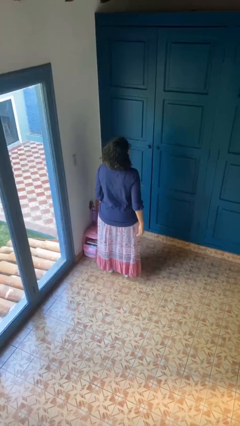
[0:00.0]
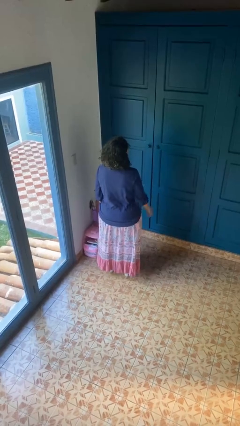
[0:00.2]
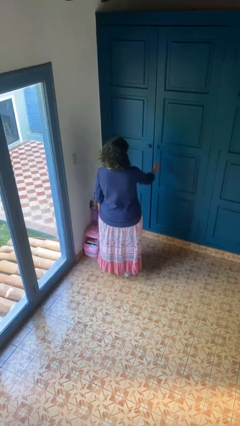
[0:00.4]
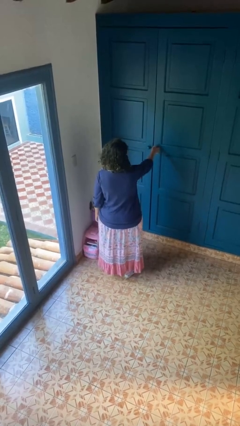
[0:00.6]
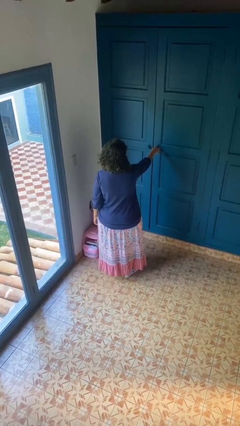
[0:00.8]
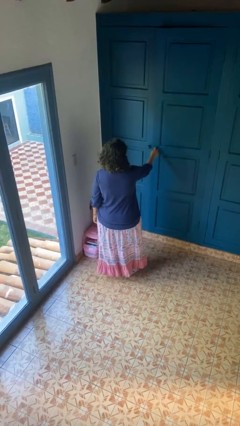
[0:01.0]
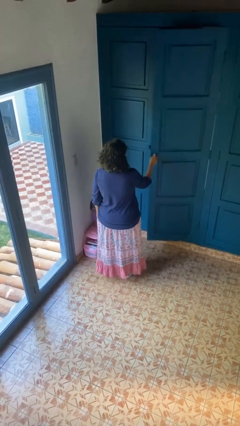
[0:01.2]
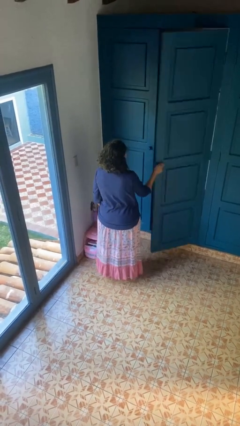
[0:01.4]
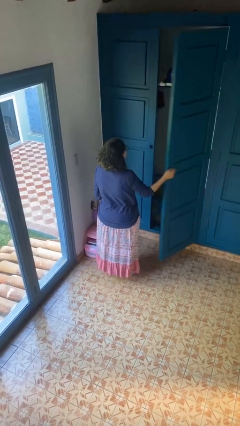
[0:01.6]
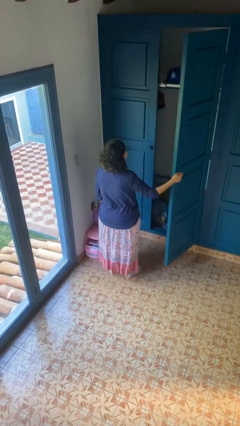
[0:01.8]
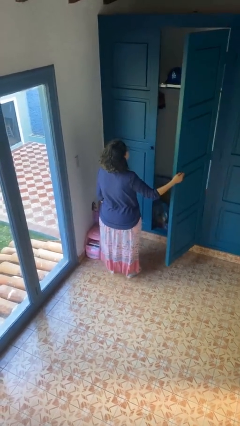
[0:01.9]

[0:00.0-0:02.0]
person opens closet door

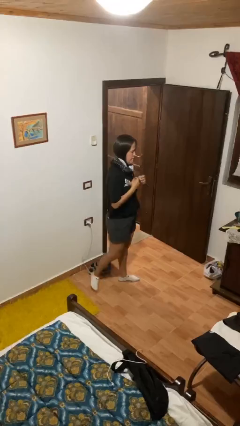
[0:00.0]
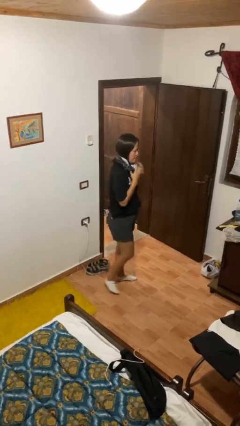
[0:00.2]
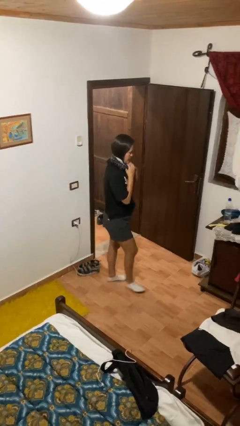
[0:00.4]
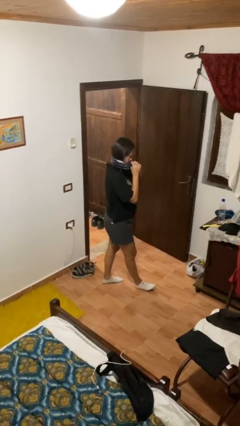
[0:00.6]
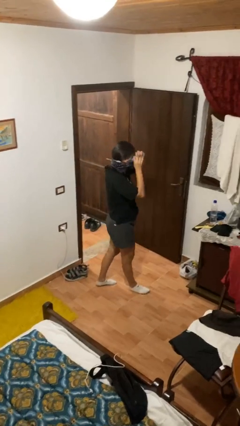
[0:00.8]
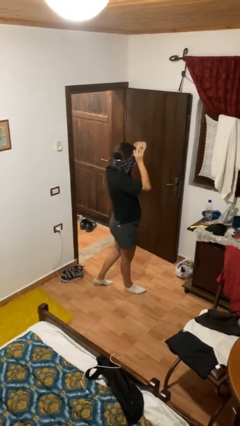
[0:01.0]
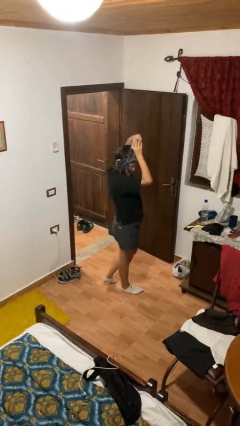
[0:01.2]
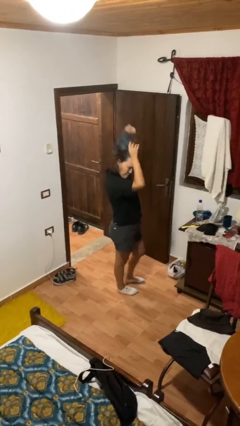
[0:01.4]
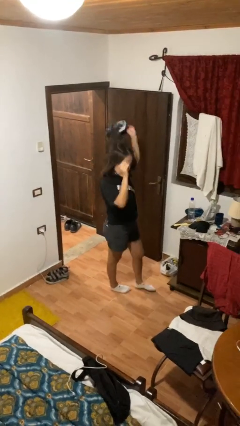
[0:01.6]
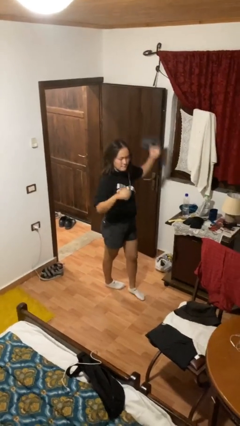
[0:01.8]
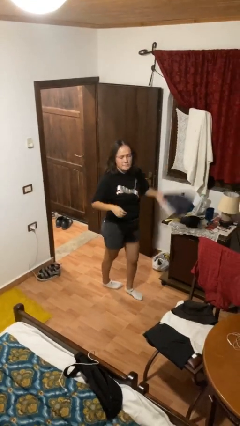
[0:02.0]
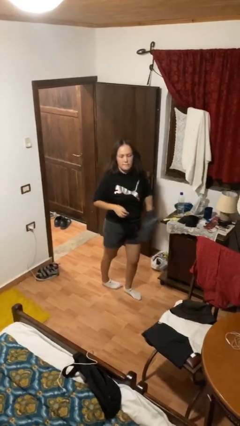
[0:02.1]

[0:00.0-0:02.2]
person takes off scarf

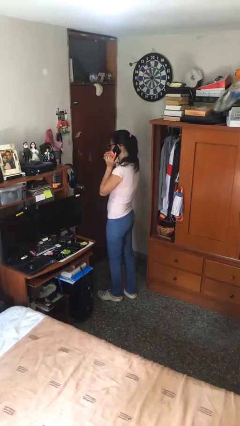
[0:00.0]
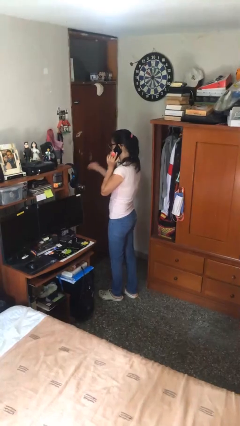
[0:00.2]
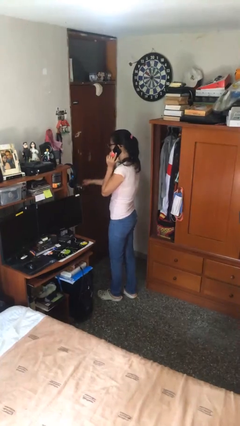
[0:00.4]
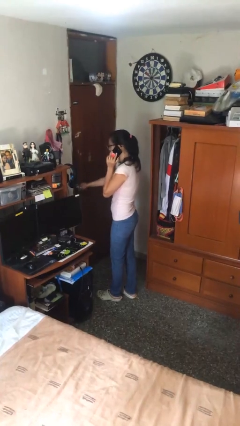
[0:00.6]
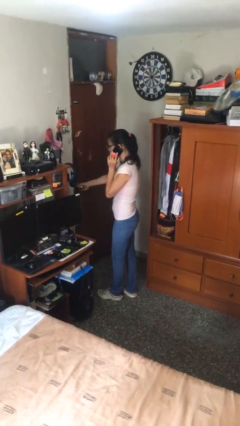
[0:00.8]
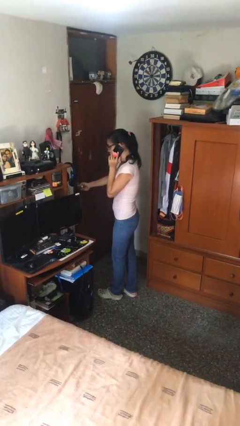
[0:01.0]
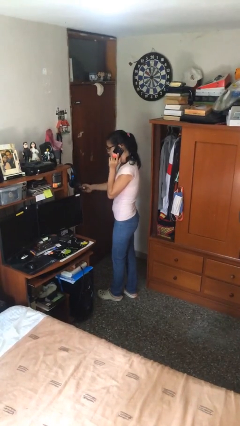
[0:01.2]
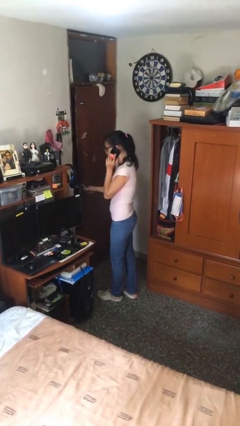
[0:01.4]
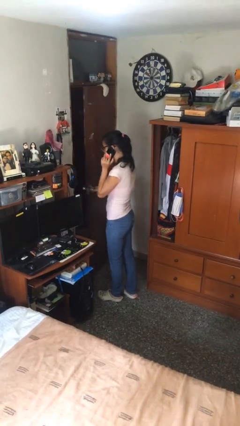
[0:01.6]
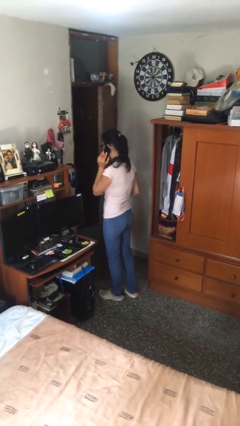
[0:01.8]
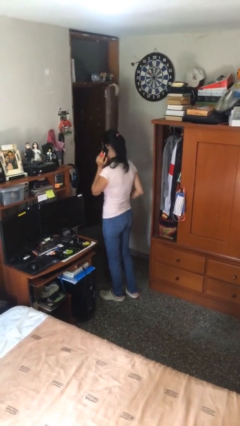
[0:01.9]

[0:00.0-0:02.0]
person opens facility door

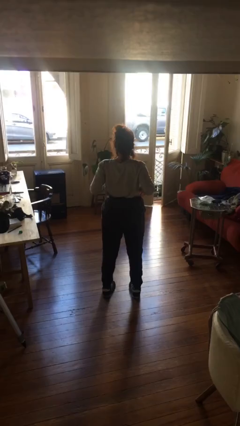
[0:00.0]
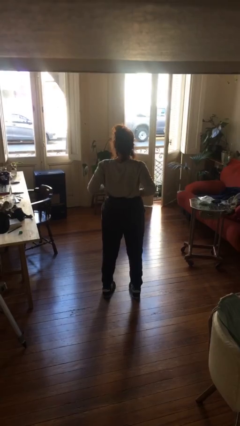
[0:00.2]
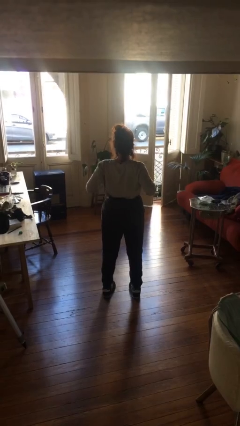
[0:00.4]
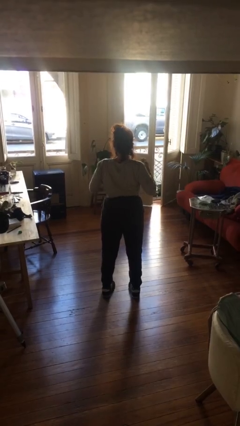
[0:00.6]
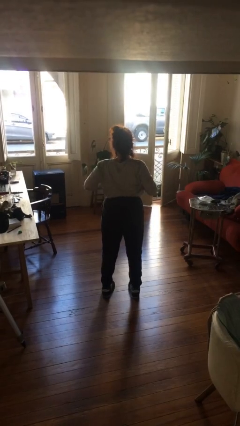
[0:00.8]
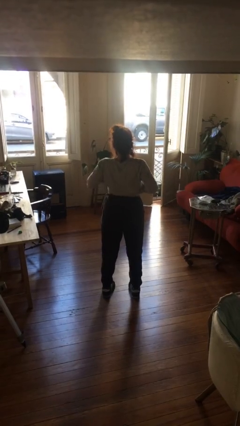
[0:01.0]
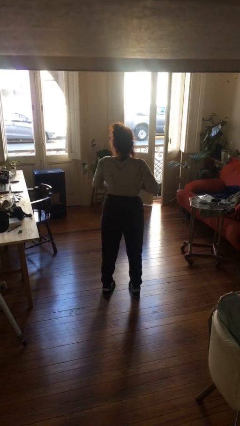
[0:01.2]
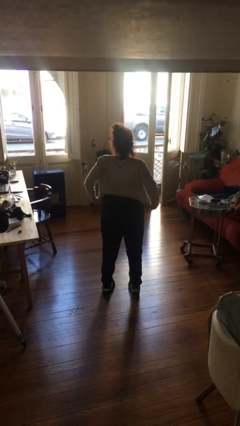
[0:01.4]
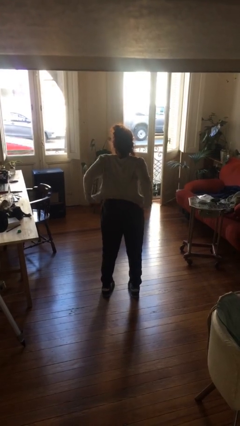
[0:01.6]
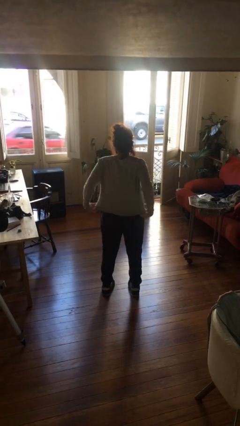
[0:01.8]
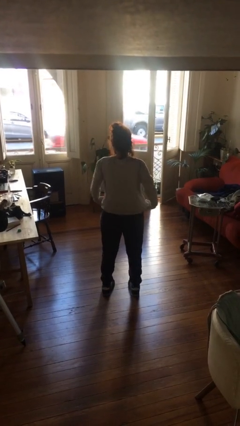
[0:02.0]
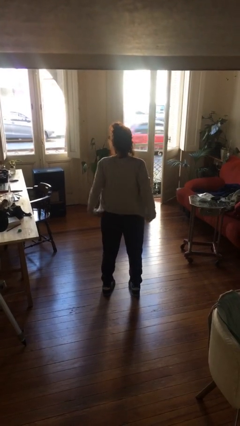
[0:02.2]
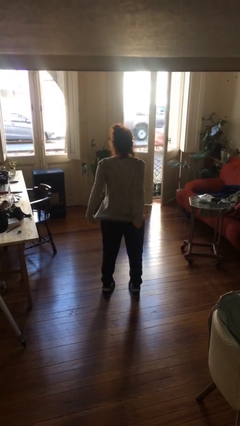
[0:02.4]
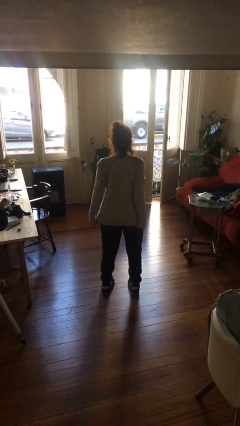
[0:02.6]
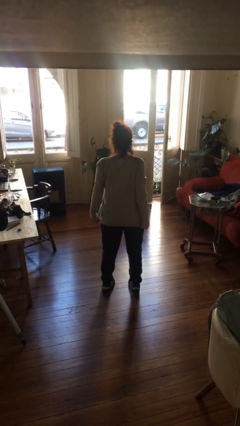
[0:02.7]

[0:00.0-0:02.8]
person untucks shirt

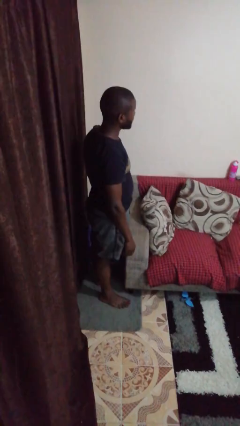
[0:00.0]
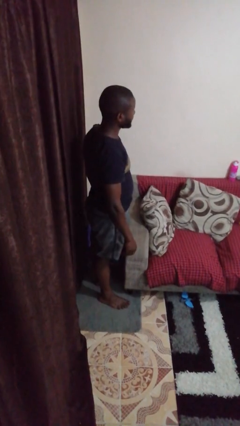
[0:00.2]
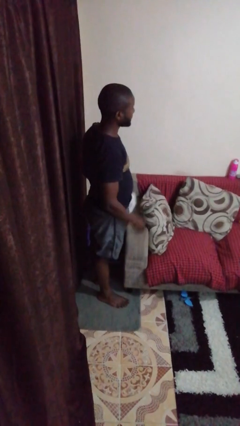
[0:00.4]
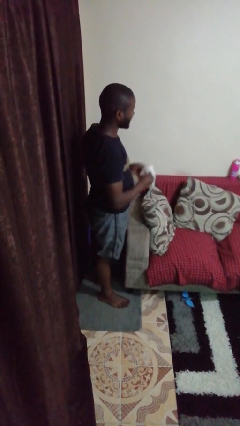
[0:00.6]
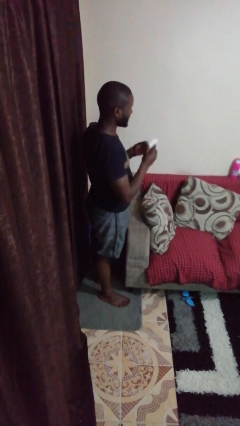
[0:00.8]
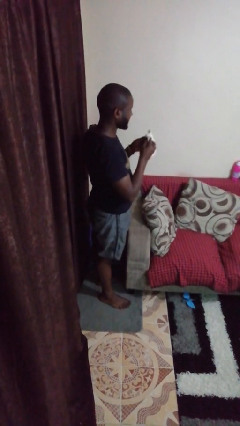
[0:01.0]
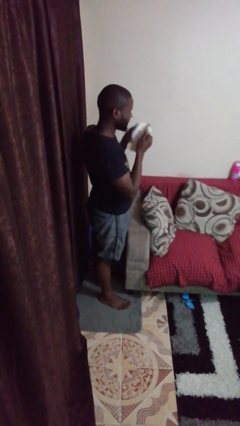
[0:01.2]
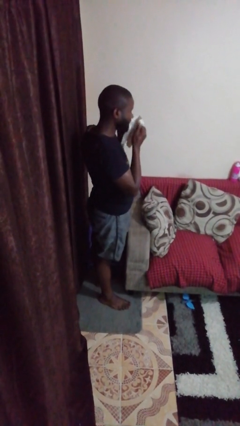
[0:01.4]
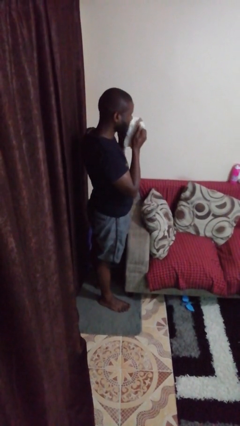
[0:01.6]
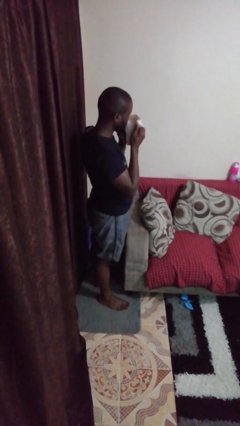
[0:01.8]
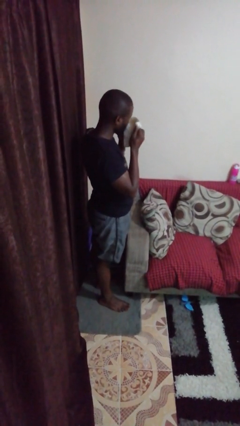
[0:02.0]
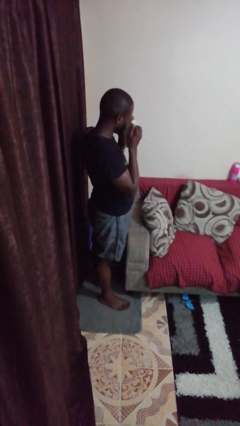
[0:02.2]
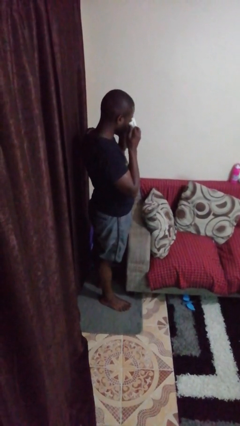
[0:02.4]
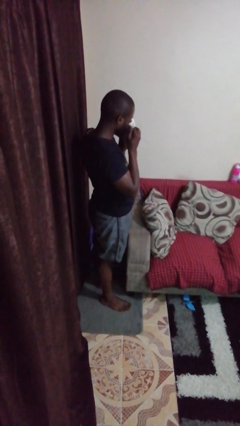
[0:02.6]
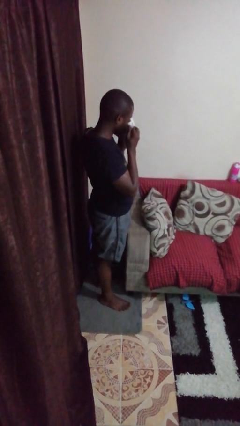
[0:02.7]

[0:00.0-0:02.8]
person blows nose

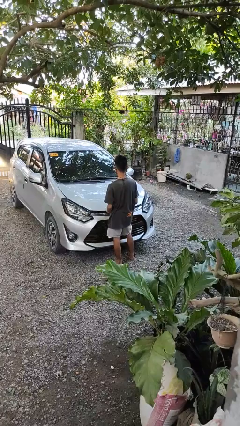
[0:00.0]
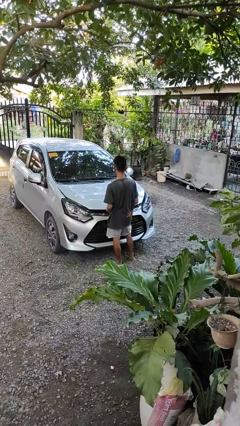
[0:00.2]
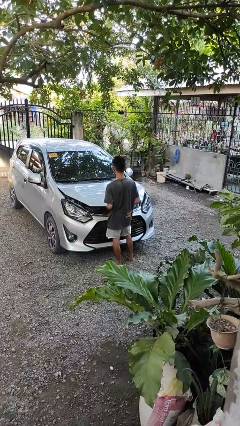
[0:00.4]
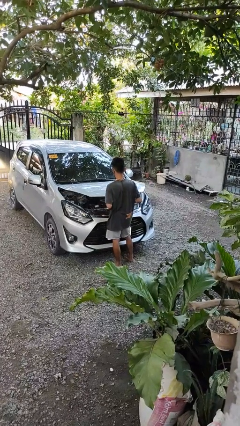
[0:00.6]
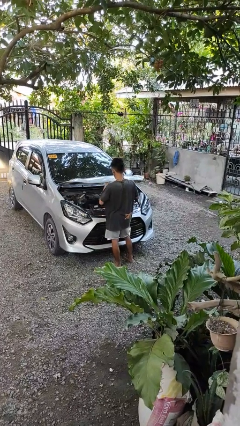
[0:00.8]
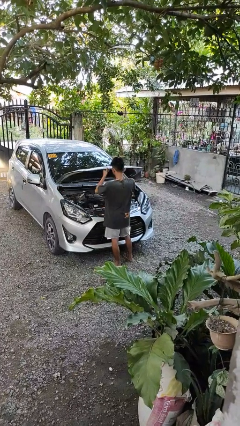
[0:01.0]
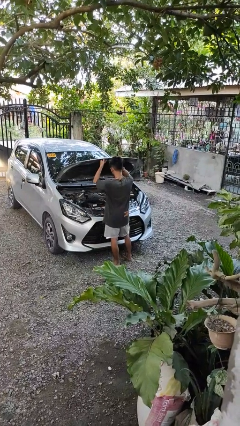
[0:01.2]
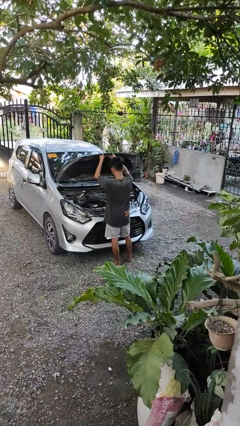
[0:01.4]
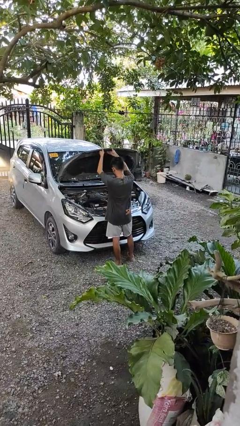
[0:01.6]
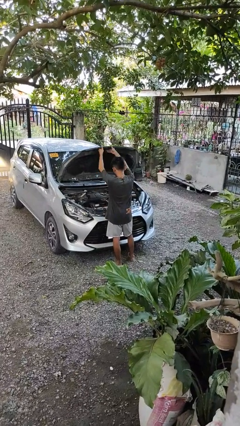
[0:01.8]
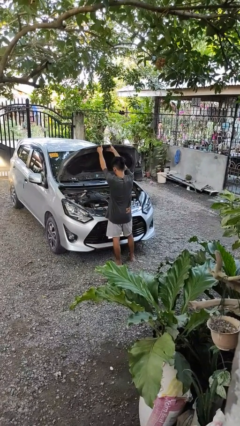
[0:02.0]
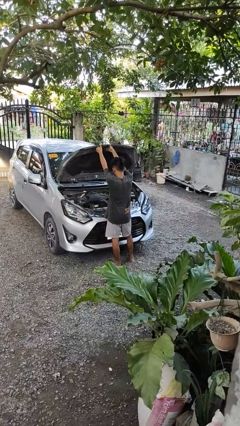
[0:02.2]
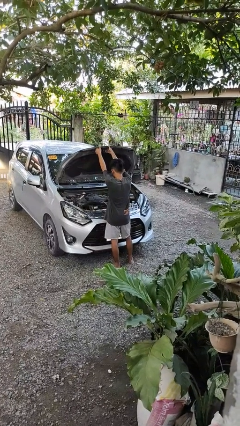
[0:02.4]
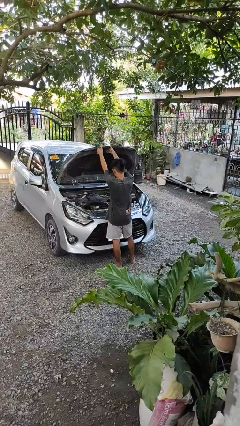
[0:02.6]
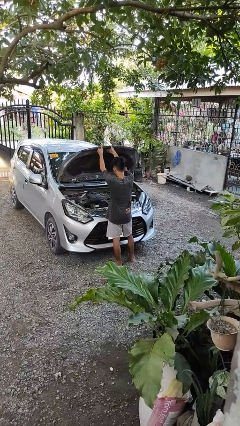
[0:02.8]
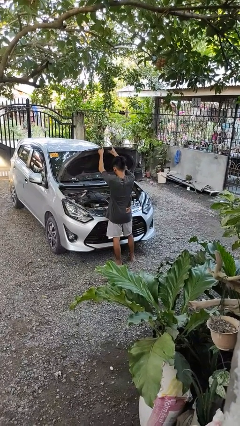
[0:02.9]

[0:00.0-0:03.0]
person opens car hood

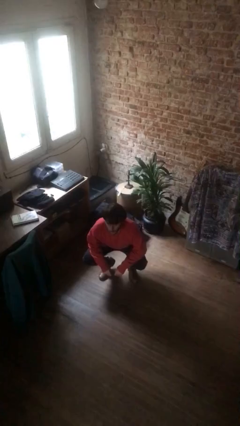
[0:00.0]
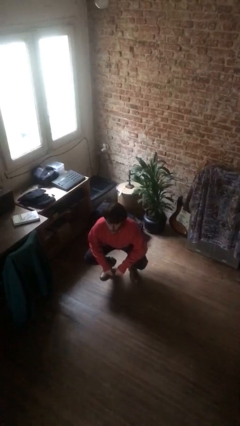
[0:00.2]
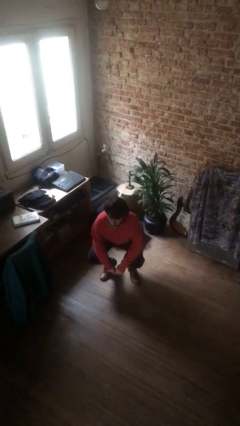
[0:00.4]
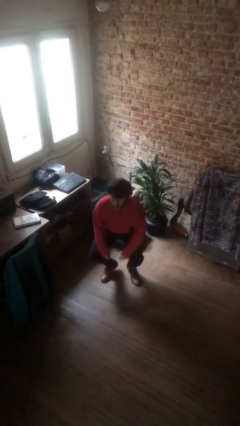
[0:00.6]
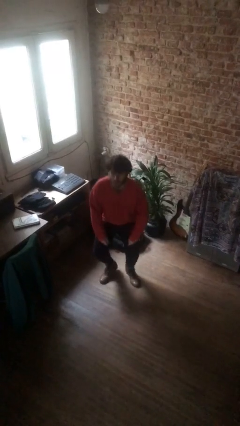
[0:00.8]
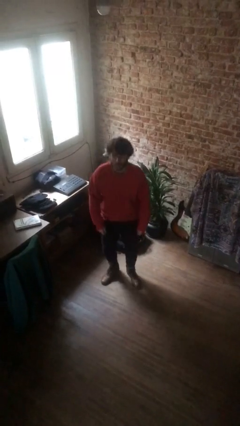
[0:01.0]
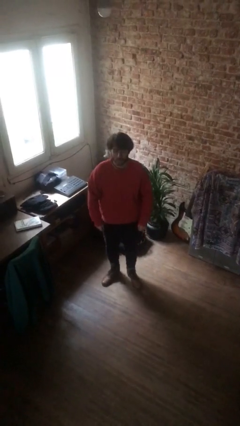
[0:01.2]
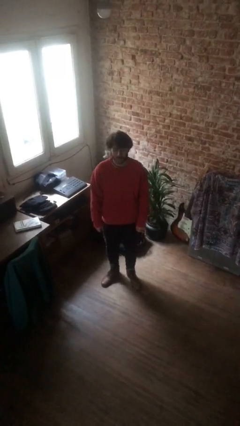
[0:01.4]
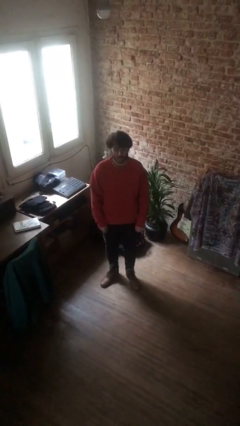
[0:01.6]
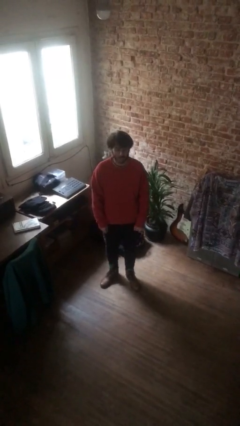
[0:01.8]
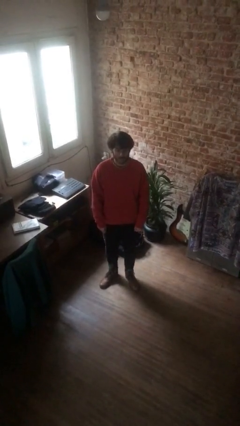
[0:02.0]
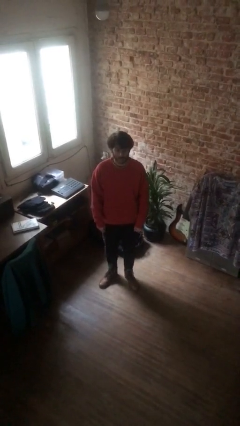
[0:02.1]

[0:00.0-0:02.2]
person stands up

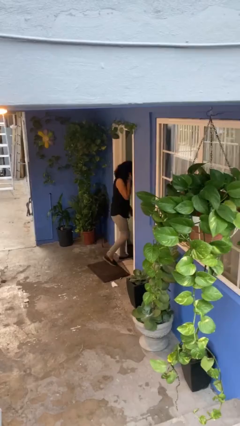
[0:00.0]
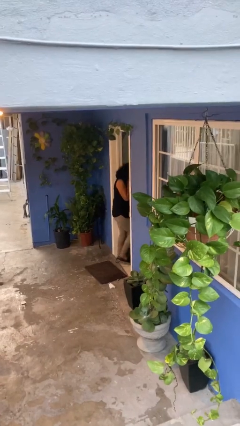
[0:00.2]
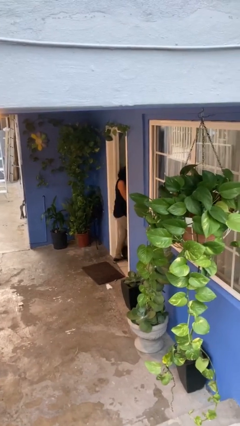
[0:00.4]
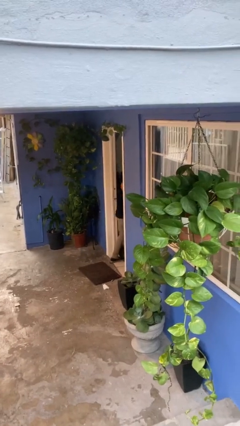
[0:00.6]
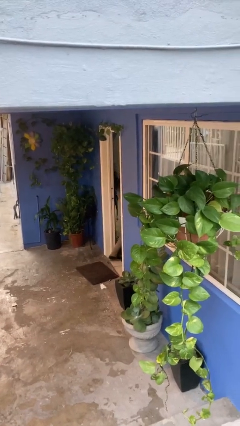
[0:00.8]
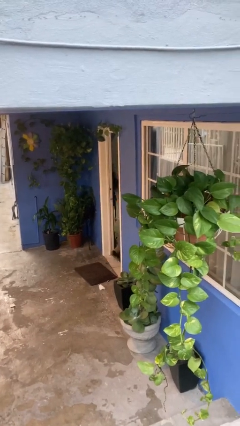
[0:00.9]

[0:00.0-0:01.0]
person exits scene through structure